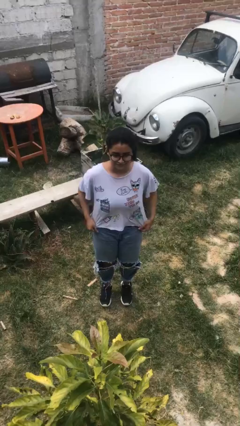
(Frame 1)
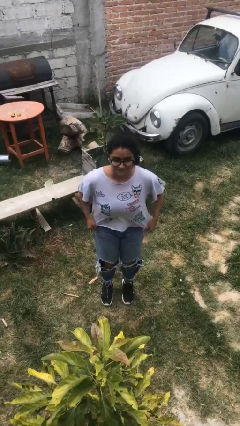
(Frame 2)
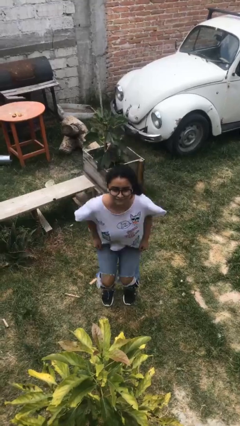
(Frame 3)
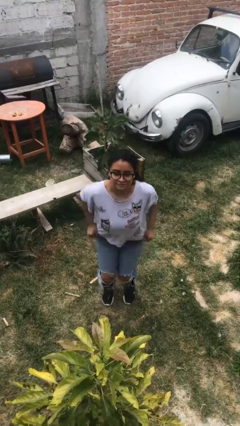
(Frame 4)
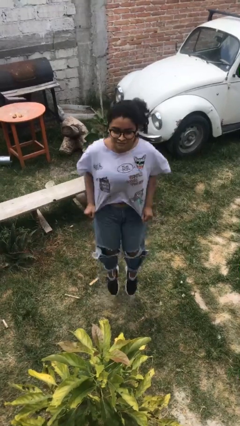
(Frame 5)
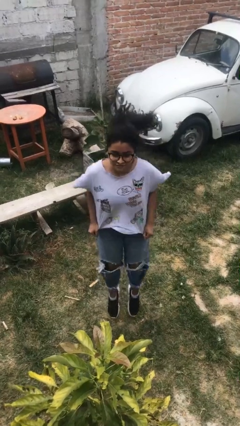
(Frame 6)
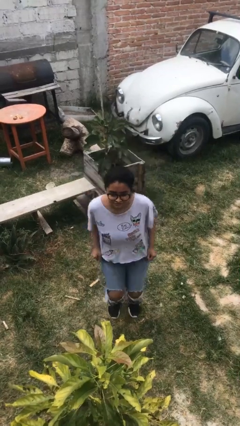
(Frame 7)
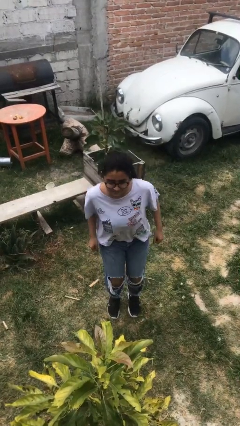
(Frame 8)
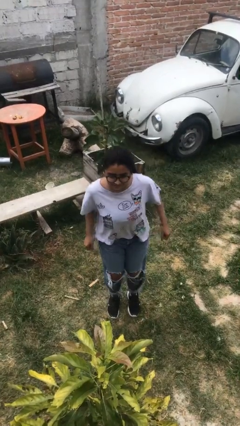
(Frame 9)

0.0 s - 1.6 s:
person jumps

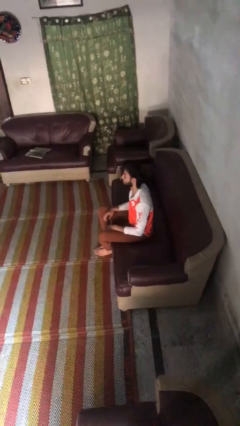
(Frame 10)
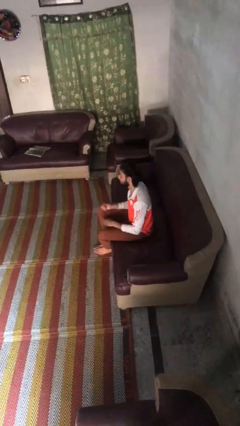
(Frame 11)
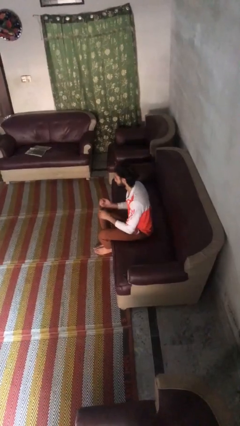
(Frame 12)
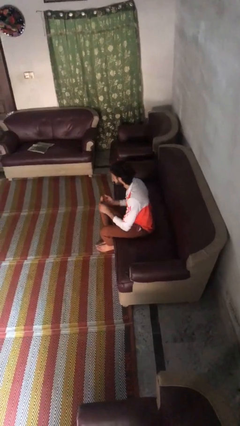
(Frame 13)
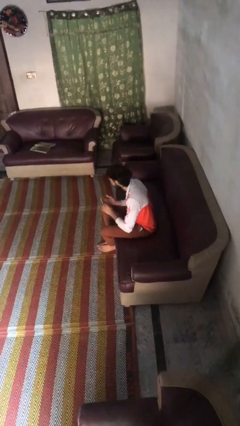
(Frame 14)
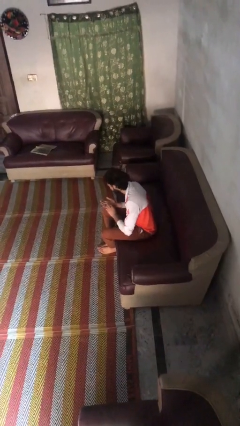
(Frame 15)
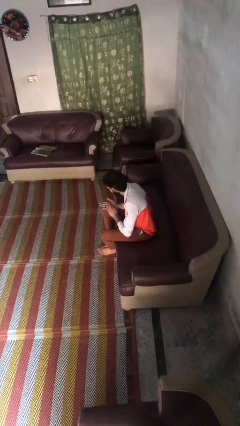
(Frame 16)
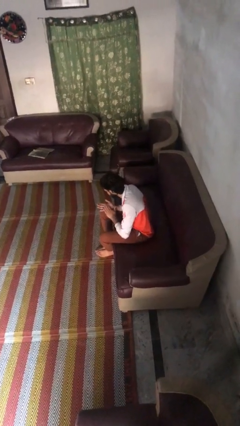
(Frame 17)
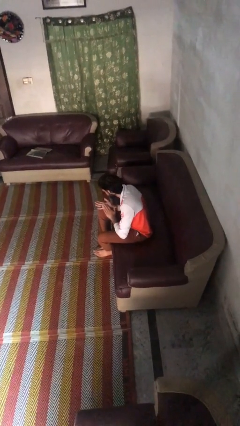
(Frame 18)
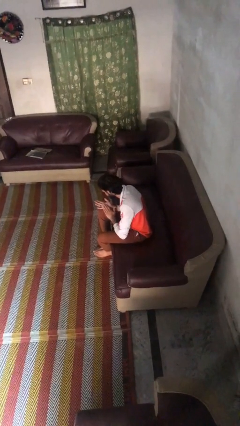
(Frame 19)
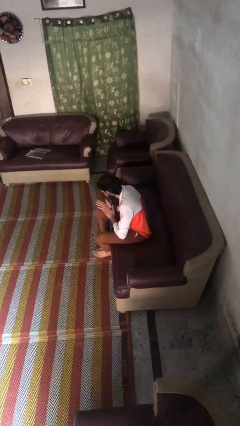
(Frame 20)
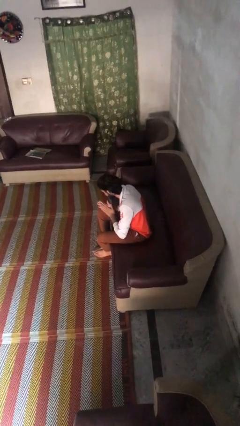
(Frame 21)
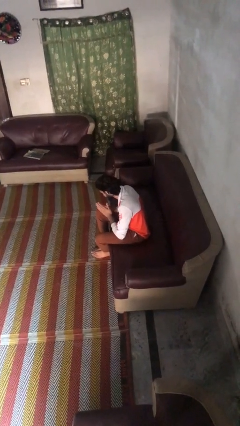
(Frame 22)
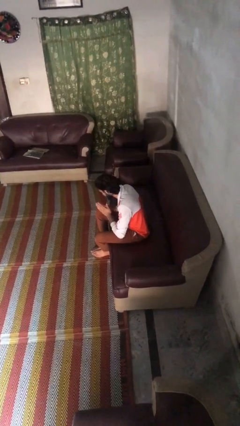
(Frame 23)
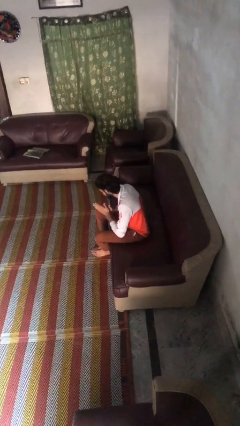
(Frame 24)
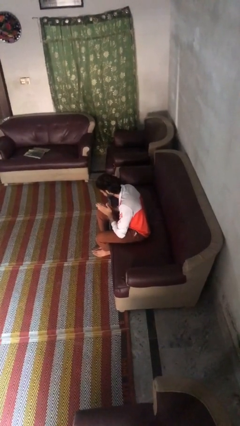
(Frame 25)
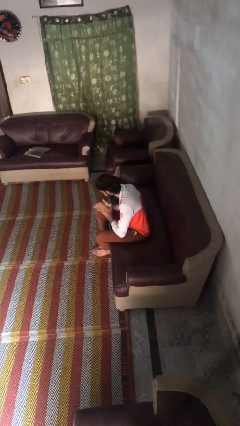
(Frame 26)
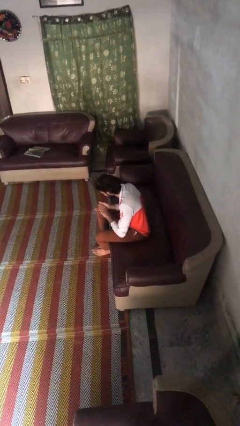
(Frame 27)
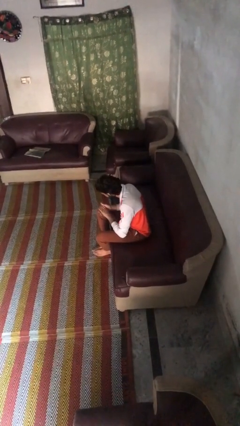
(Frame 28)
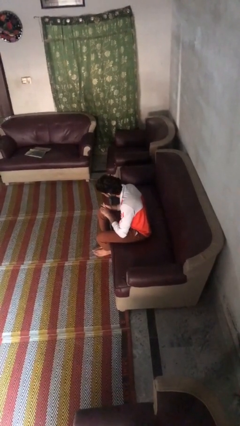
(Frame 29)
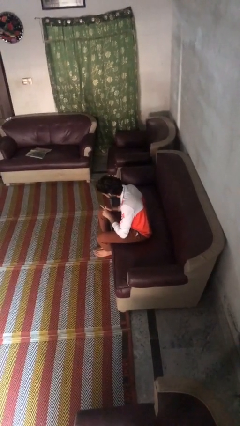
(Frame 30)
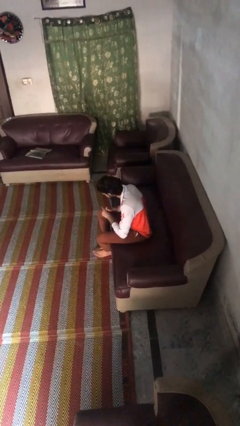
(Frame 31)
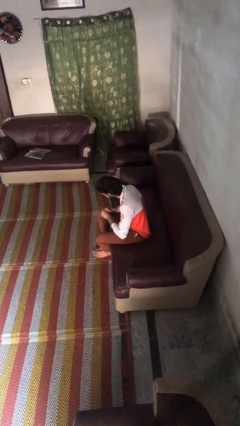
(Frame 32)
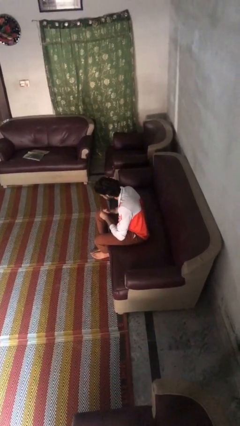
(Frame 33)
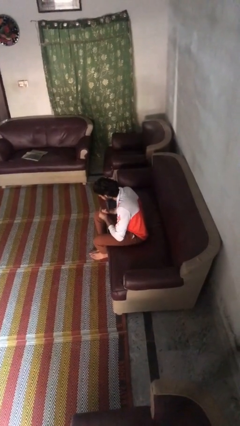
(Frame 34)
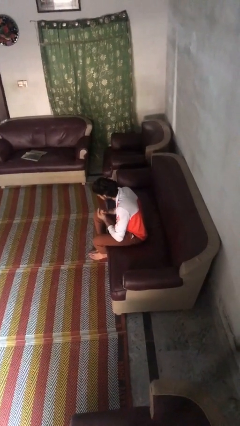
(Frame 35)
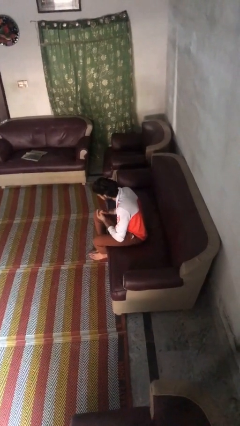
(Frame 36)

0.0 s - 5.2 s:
person looks at hands in lap

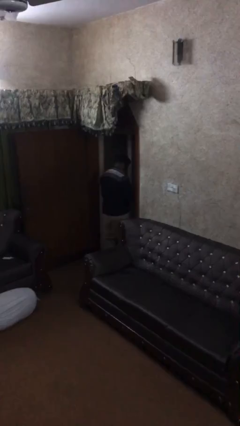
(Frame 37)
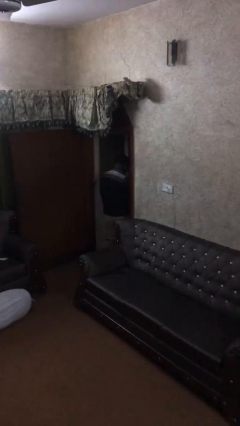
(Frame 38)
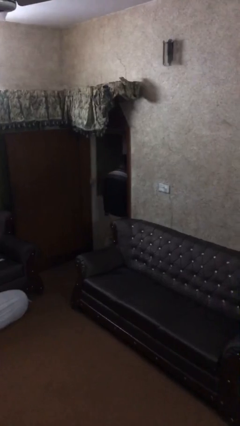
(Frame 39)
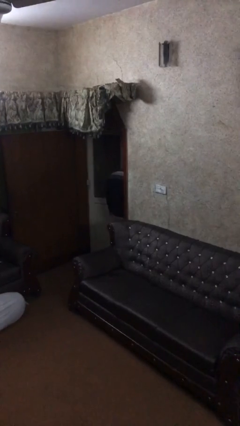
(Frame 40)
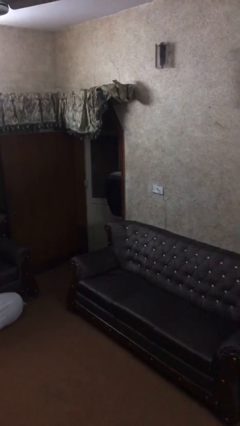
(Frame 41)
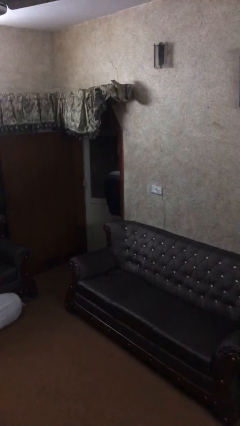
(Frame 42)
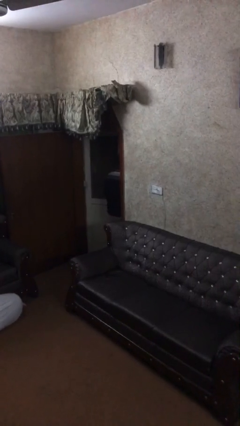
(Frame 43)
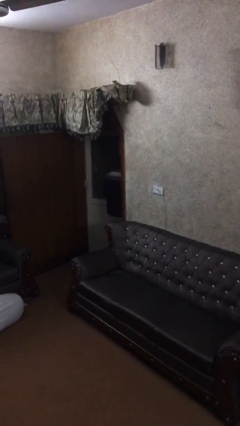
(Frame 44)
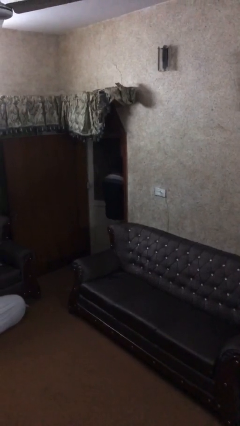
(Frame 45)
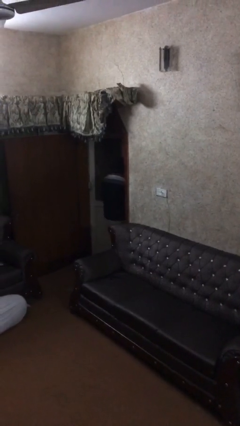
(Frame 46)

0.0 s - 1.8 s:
person opens facility door

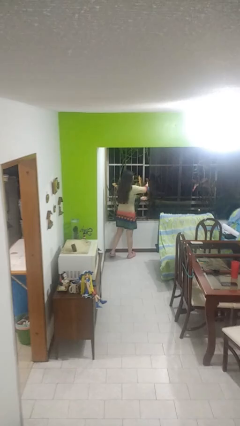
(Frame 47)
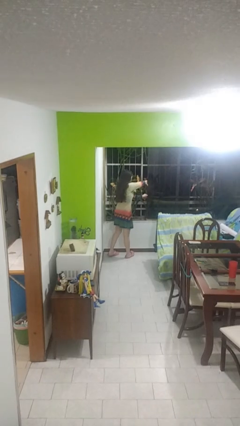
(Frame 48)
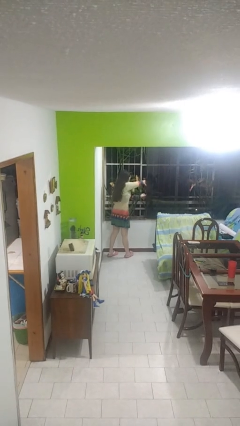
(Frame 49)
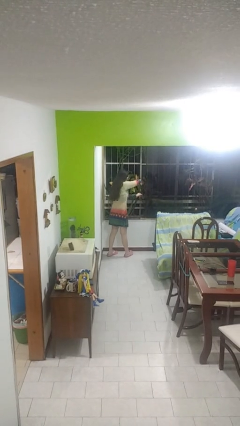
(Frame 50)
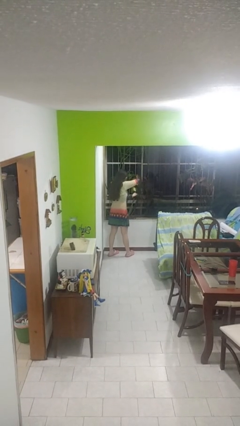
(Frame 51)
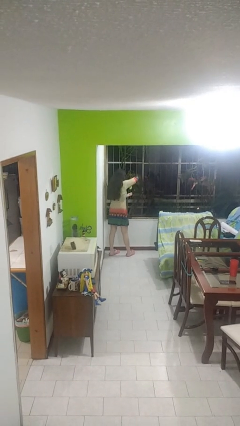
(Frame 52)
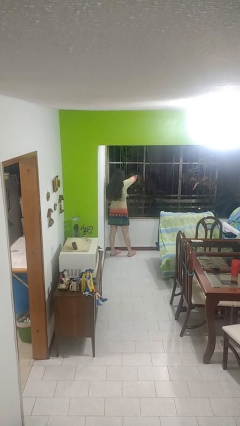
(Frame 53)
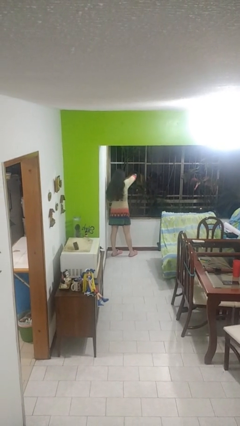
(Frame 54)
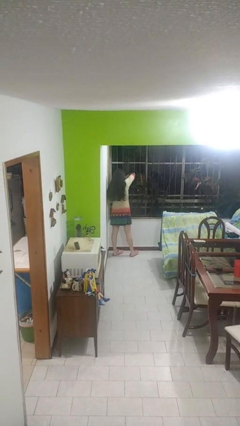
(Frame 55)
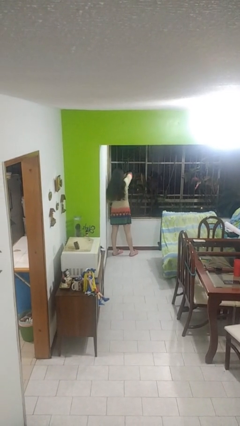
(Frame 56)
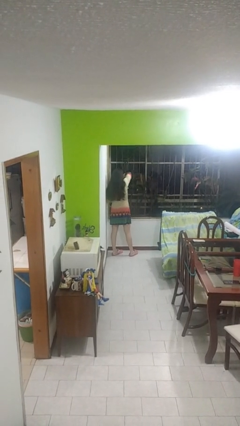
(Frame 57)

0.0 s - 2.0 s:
person closes home window

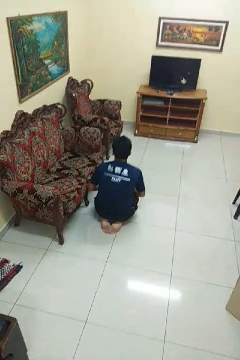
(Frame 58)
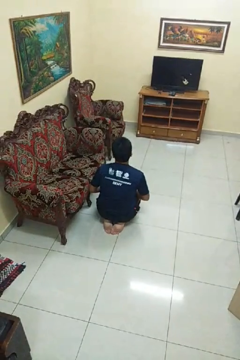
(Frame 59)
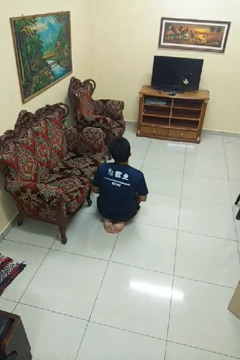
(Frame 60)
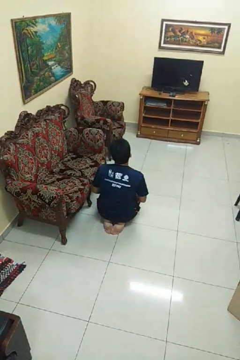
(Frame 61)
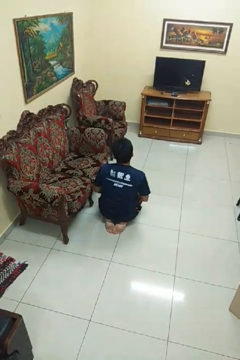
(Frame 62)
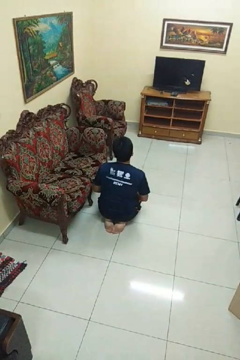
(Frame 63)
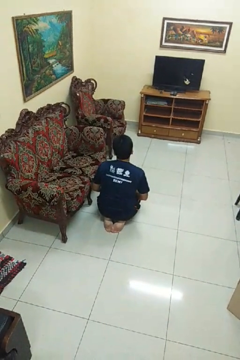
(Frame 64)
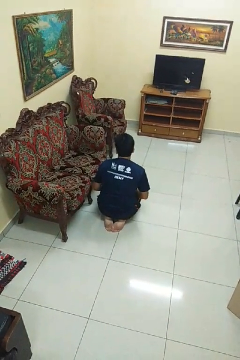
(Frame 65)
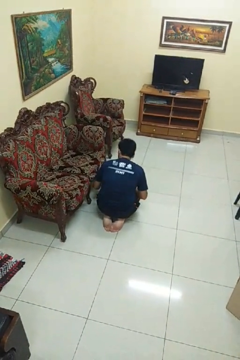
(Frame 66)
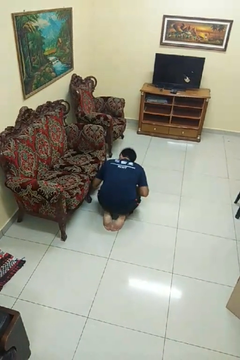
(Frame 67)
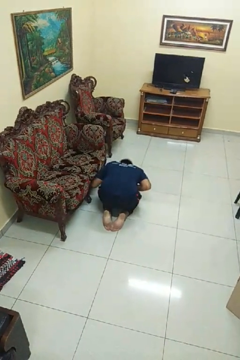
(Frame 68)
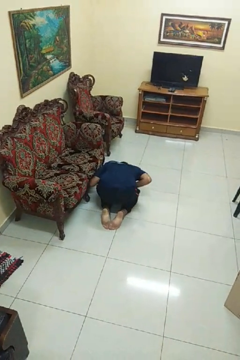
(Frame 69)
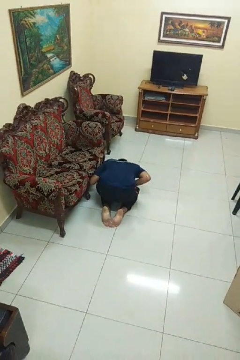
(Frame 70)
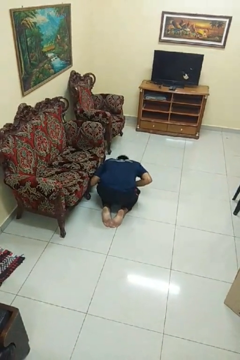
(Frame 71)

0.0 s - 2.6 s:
person searches under couch

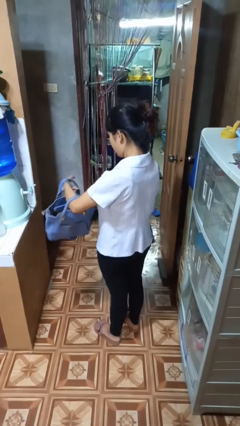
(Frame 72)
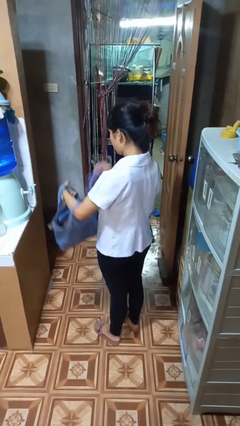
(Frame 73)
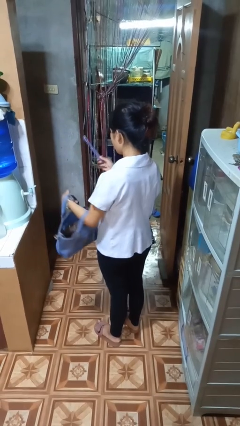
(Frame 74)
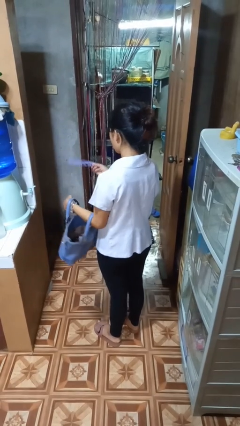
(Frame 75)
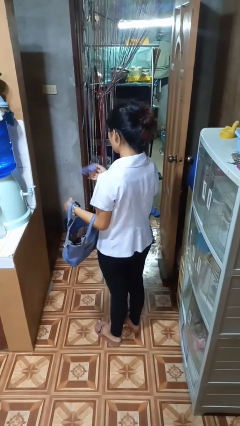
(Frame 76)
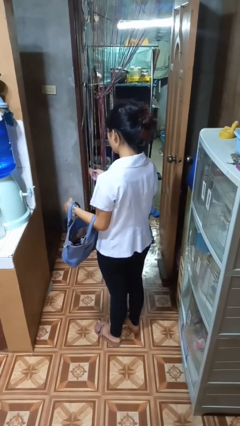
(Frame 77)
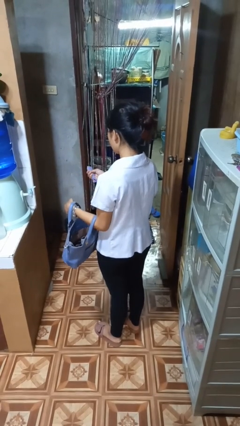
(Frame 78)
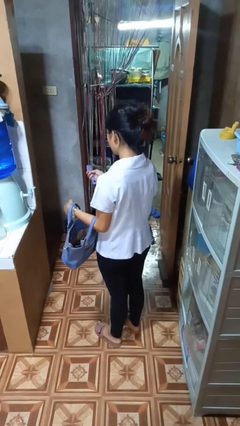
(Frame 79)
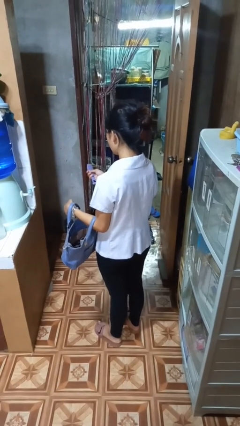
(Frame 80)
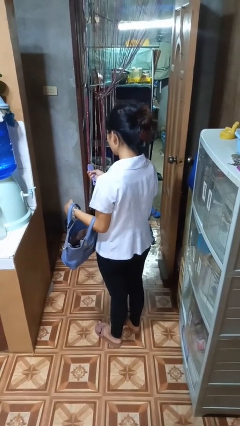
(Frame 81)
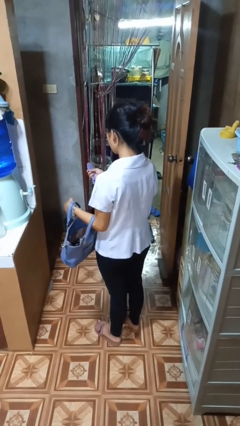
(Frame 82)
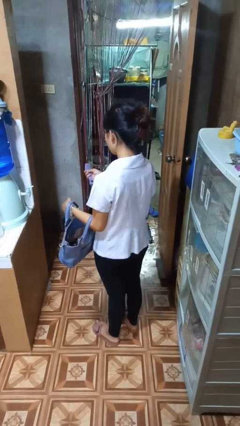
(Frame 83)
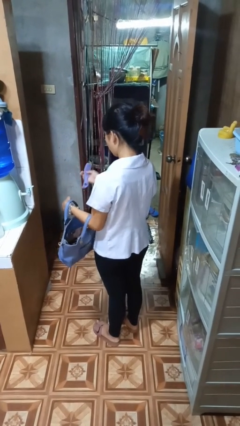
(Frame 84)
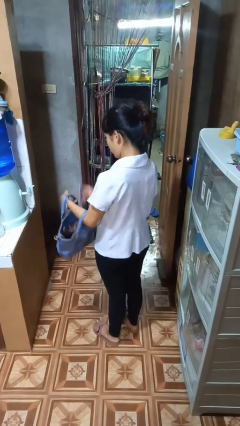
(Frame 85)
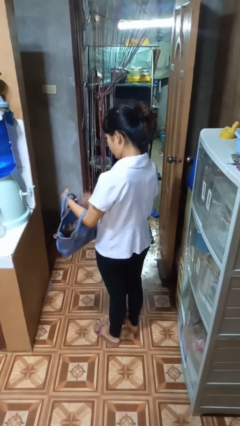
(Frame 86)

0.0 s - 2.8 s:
person takes object from purse

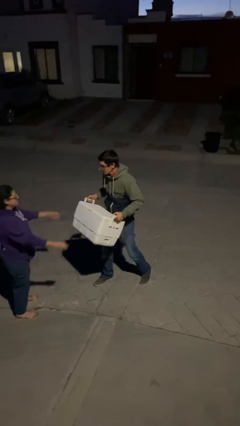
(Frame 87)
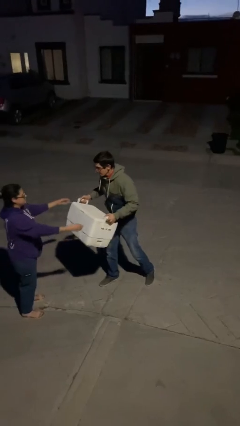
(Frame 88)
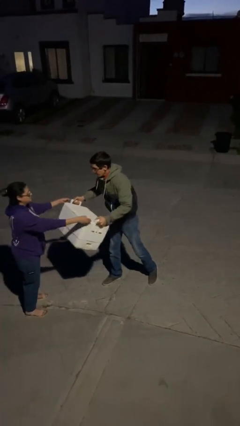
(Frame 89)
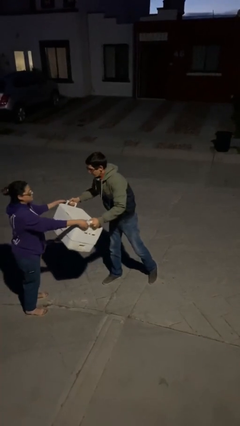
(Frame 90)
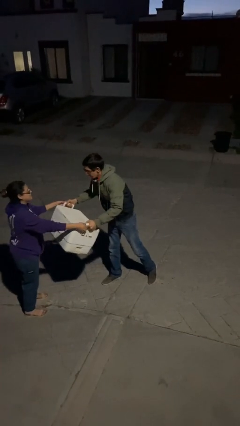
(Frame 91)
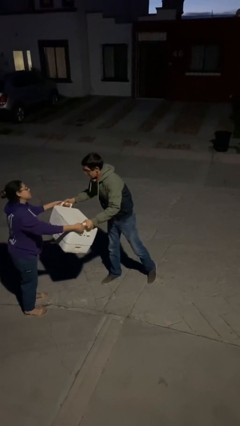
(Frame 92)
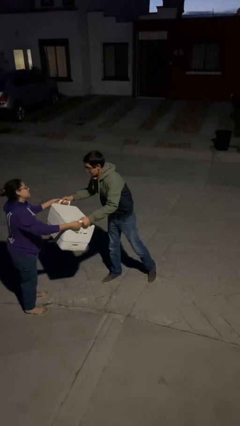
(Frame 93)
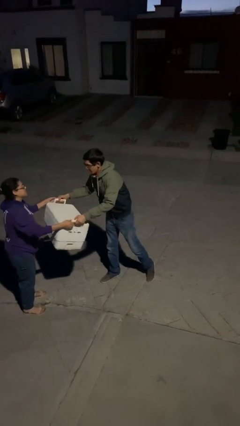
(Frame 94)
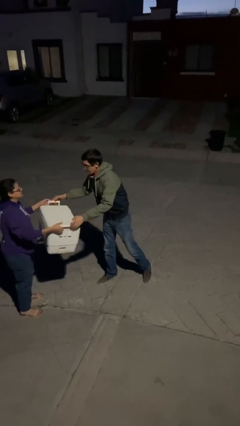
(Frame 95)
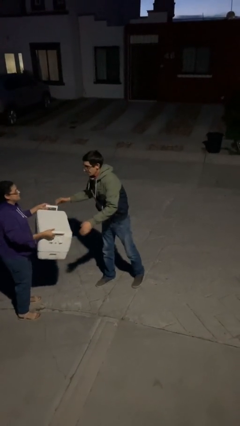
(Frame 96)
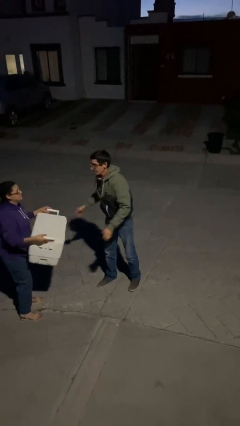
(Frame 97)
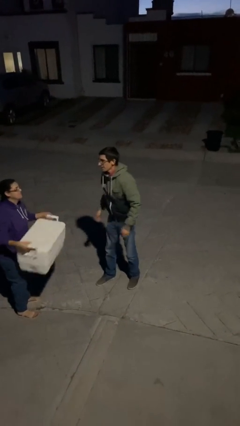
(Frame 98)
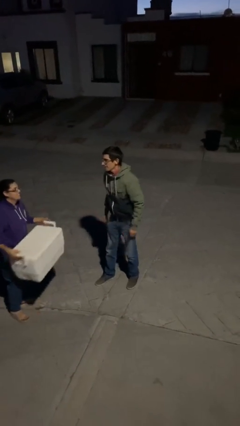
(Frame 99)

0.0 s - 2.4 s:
person transfers object to person
